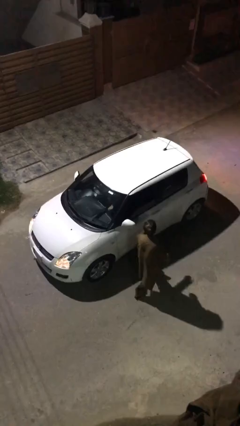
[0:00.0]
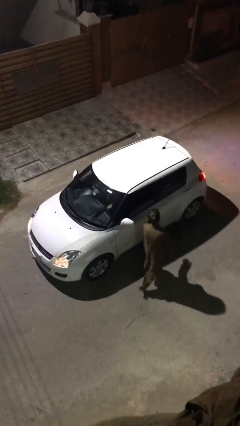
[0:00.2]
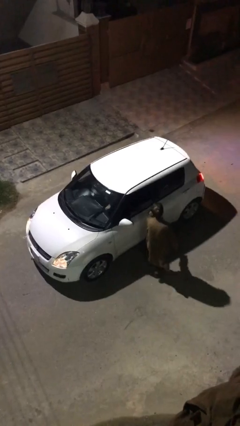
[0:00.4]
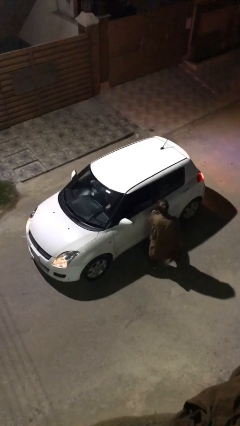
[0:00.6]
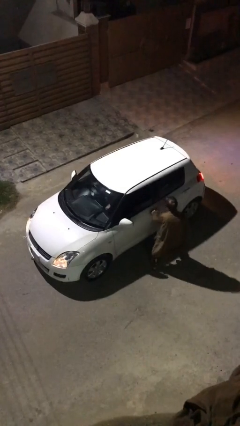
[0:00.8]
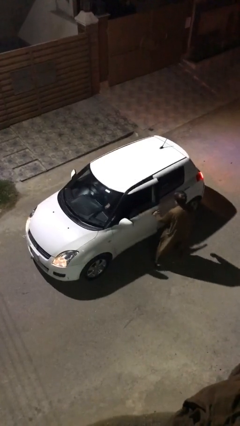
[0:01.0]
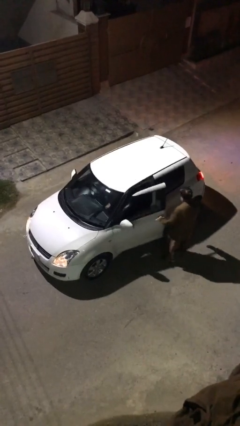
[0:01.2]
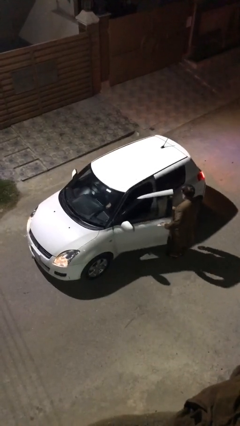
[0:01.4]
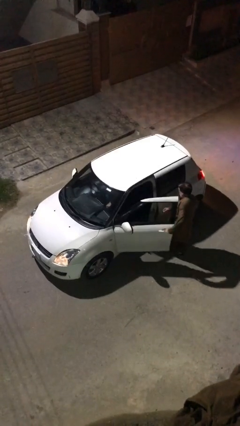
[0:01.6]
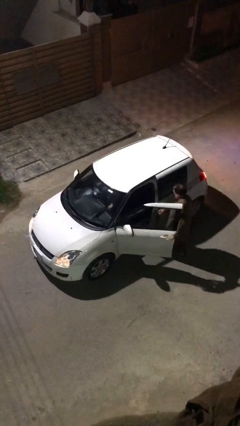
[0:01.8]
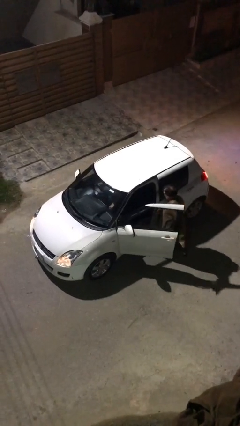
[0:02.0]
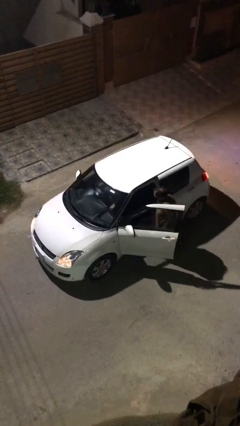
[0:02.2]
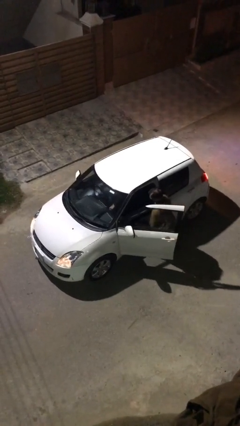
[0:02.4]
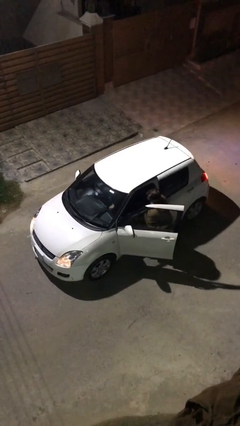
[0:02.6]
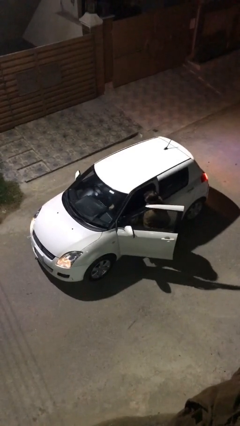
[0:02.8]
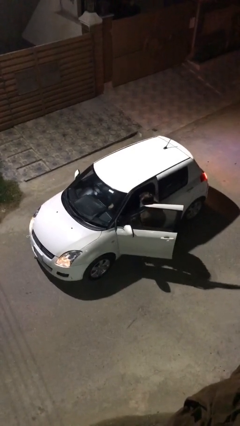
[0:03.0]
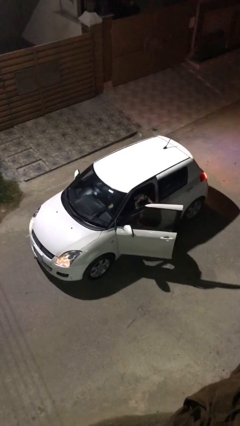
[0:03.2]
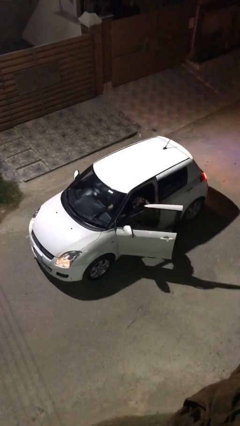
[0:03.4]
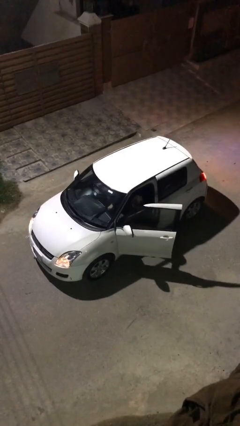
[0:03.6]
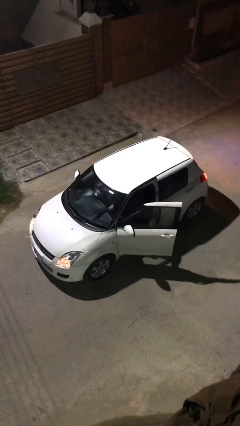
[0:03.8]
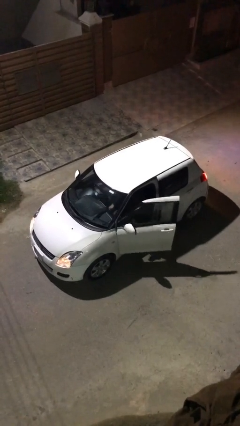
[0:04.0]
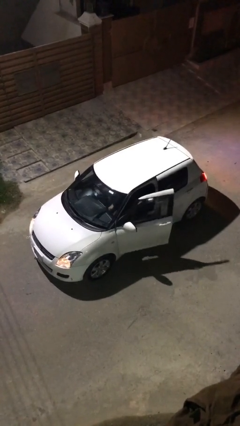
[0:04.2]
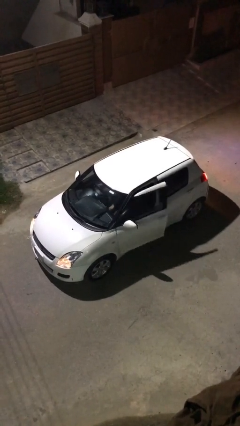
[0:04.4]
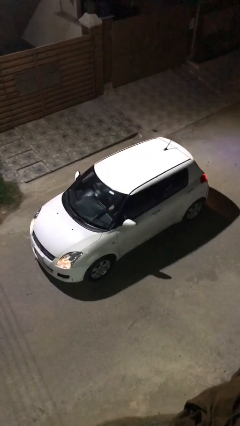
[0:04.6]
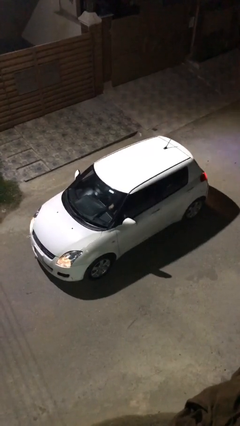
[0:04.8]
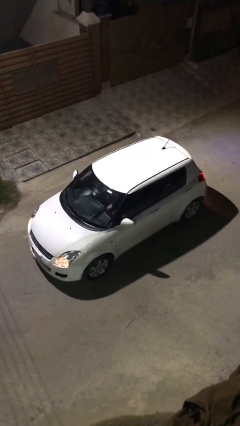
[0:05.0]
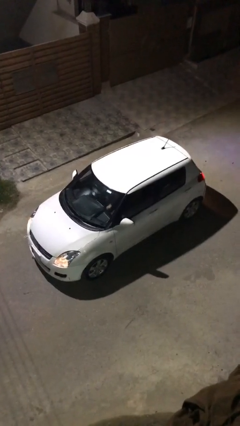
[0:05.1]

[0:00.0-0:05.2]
car picks up person

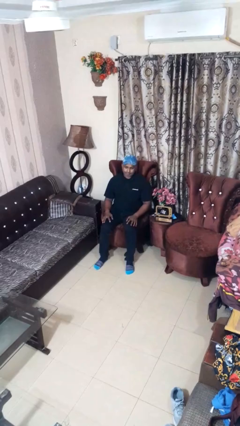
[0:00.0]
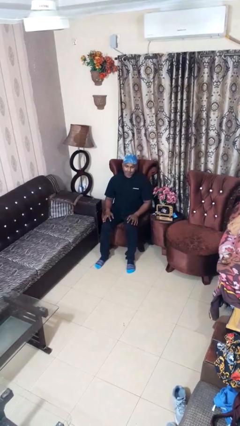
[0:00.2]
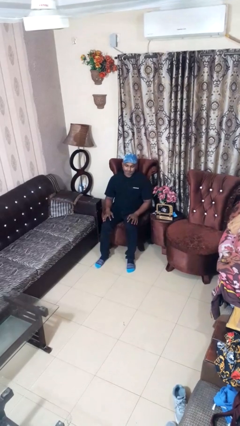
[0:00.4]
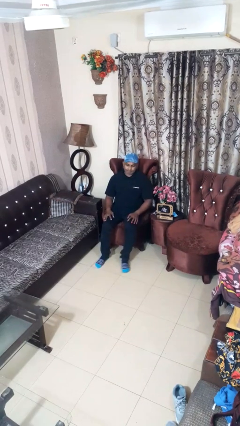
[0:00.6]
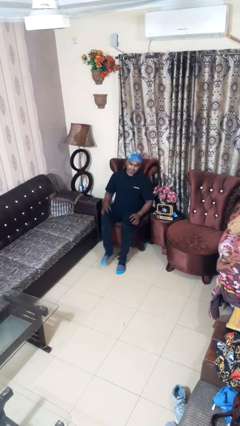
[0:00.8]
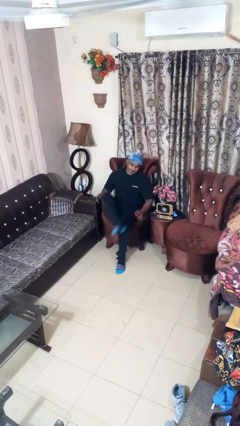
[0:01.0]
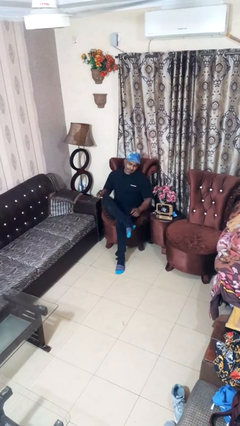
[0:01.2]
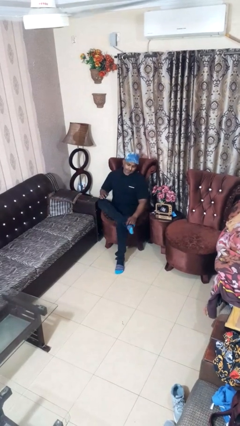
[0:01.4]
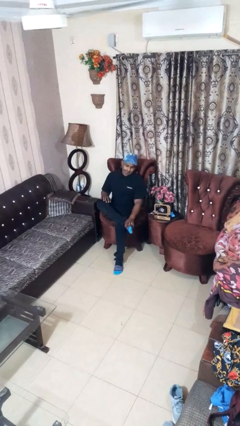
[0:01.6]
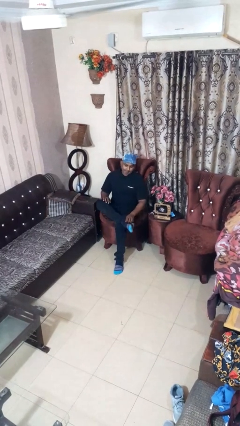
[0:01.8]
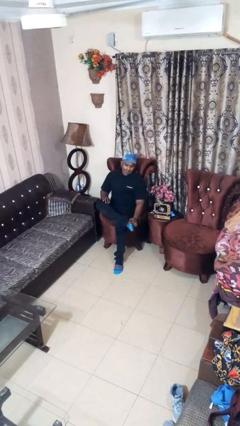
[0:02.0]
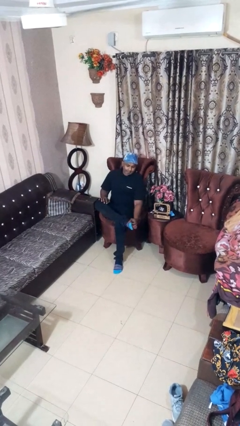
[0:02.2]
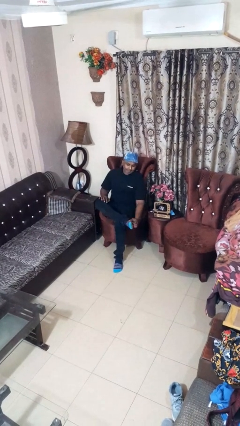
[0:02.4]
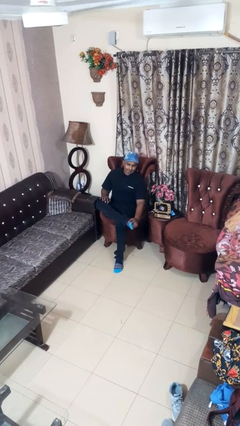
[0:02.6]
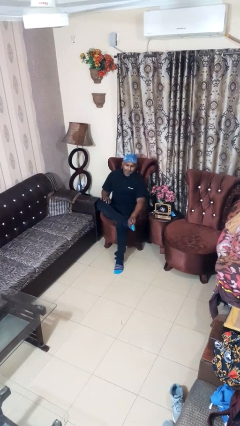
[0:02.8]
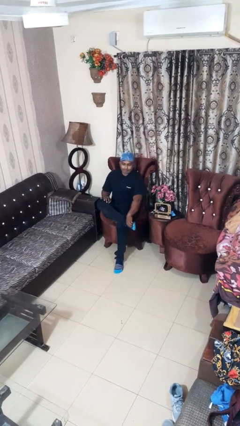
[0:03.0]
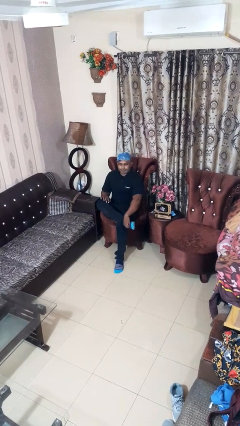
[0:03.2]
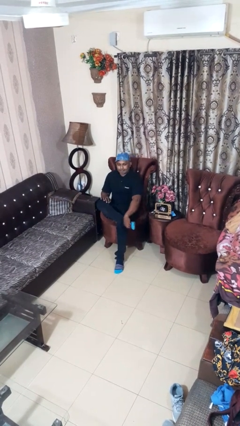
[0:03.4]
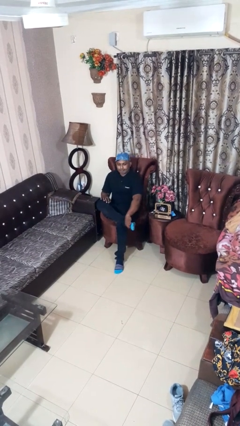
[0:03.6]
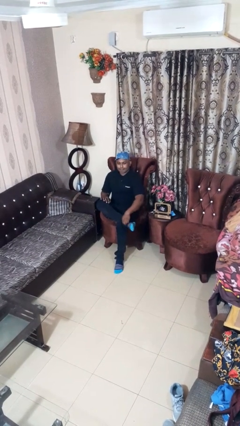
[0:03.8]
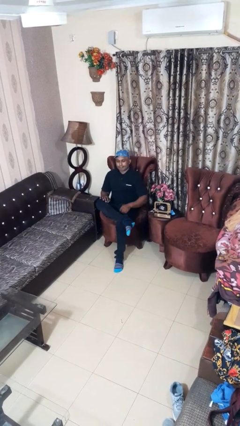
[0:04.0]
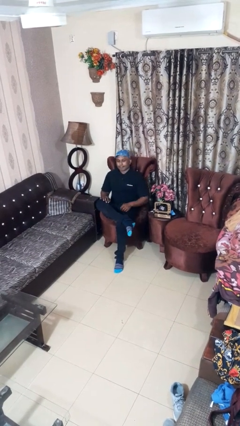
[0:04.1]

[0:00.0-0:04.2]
person rubs foot

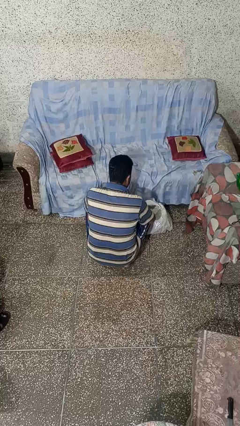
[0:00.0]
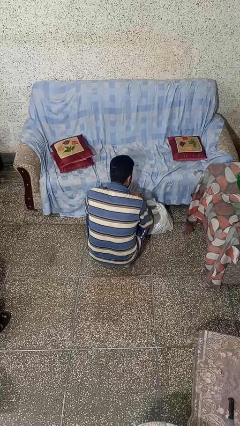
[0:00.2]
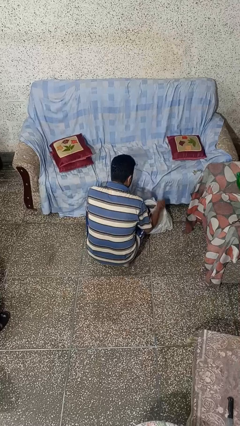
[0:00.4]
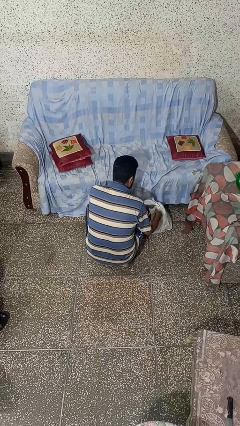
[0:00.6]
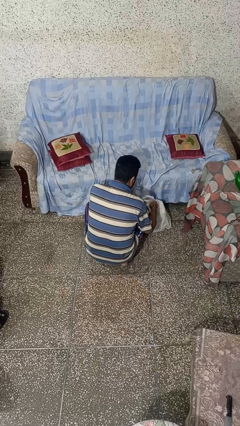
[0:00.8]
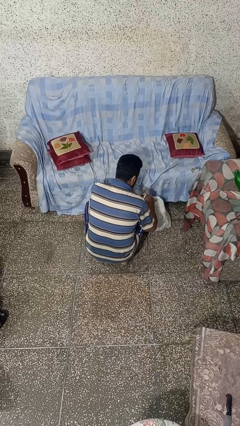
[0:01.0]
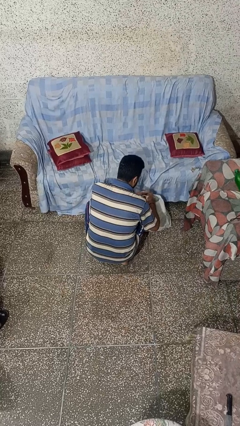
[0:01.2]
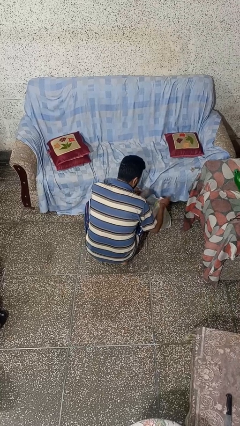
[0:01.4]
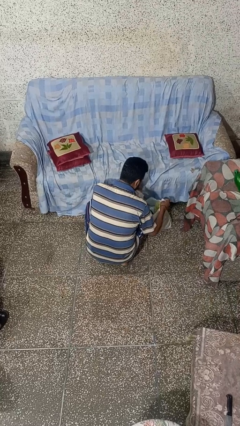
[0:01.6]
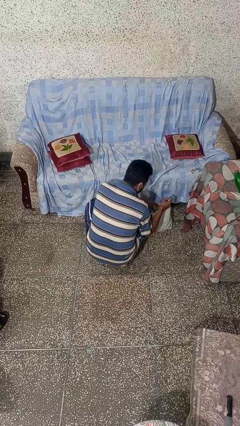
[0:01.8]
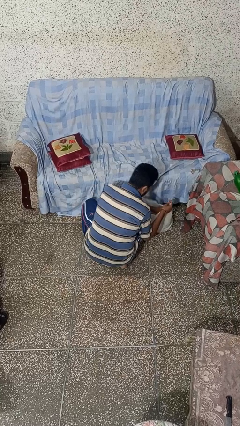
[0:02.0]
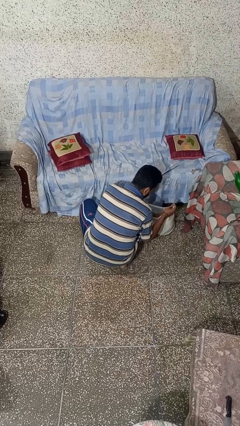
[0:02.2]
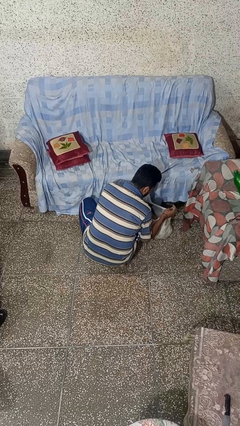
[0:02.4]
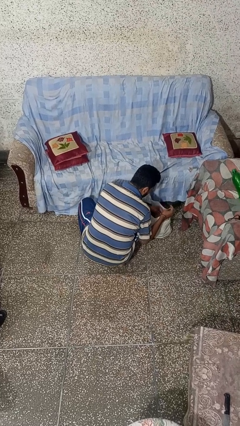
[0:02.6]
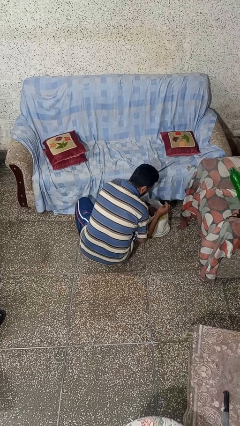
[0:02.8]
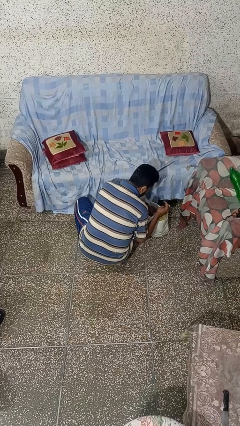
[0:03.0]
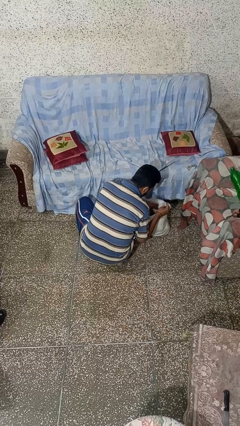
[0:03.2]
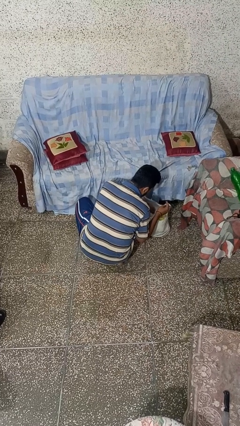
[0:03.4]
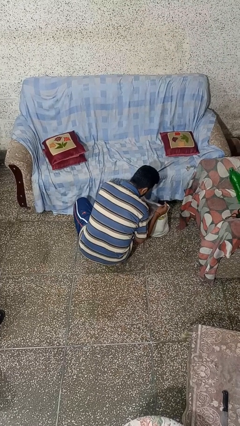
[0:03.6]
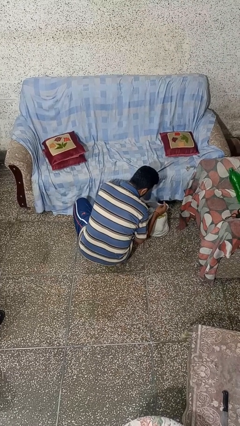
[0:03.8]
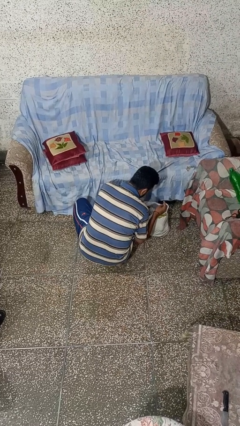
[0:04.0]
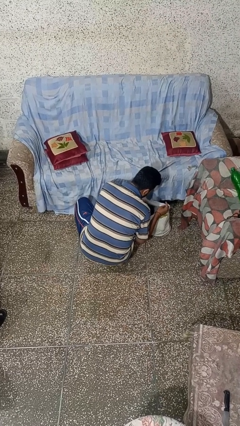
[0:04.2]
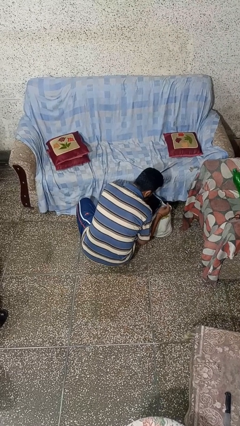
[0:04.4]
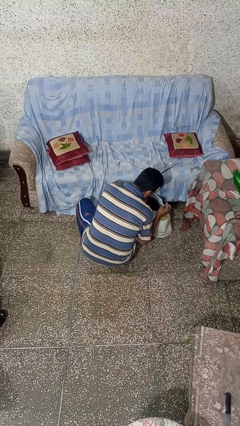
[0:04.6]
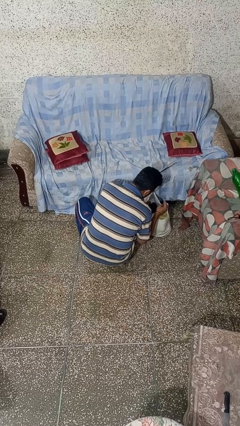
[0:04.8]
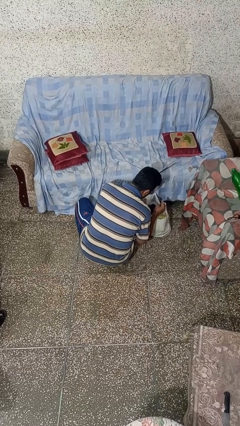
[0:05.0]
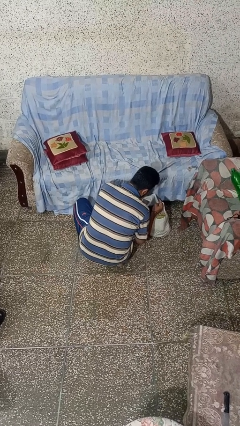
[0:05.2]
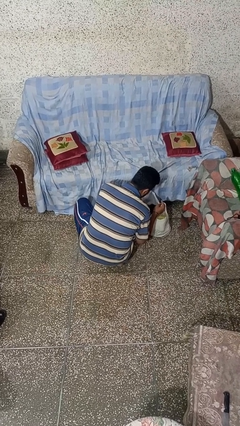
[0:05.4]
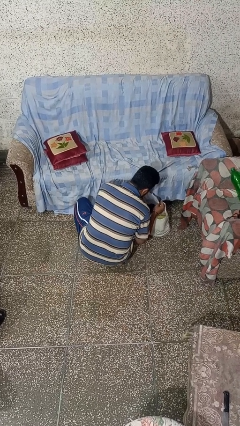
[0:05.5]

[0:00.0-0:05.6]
person searches in bag

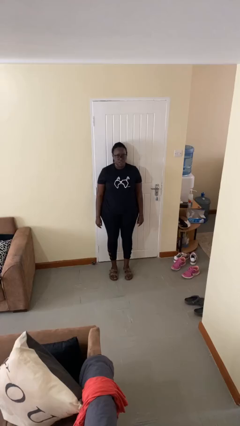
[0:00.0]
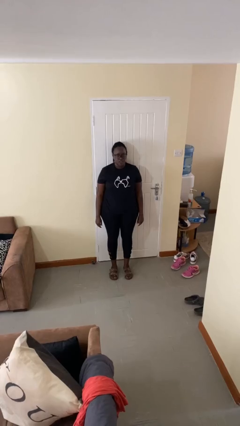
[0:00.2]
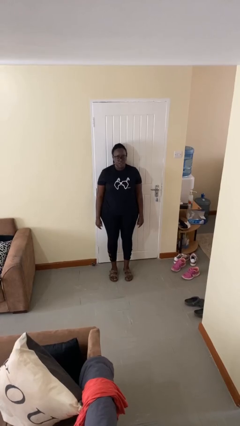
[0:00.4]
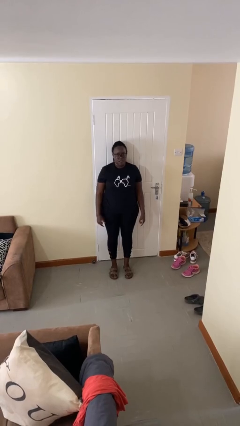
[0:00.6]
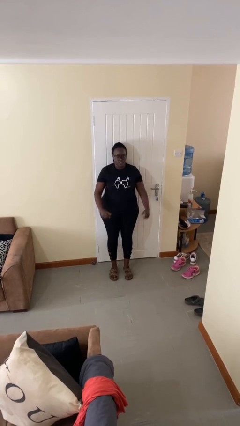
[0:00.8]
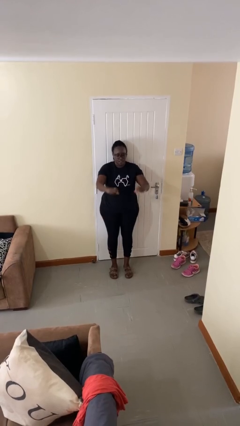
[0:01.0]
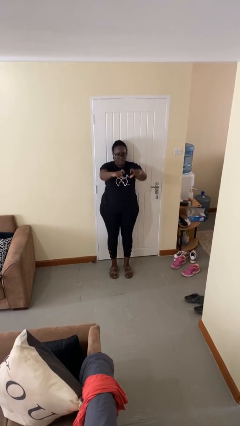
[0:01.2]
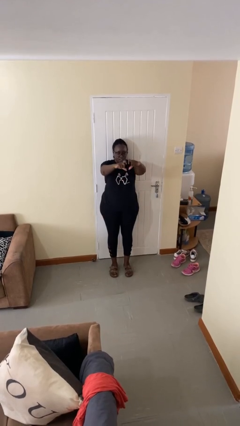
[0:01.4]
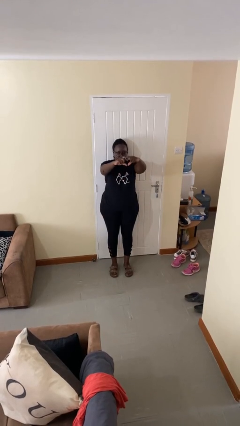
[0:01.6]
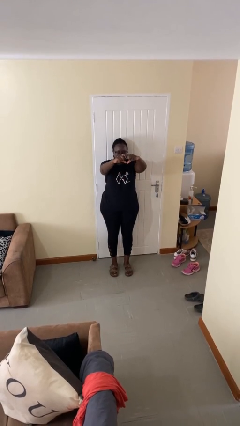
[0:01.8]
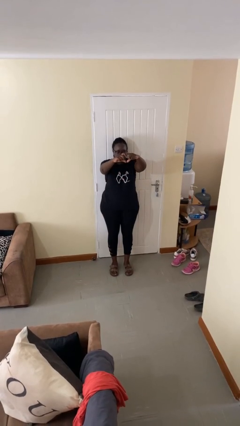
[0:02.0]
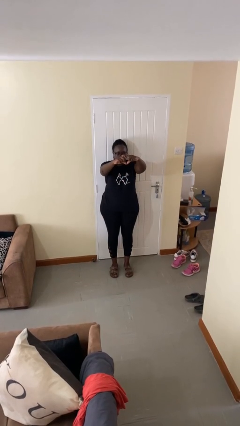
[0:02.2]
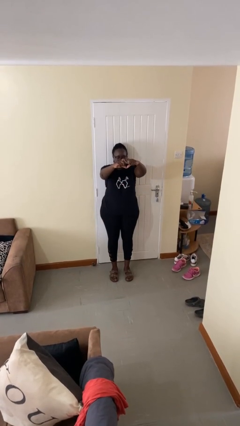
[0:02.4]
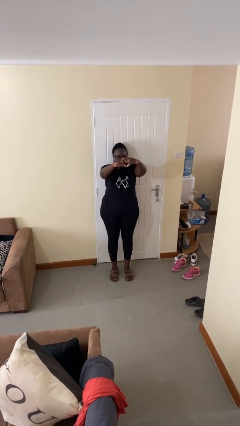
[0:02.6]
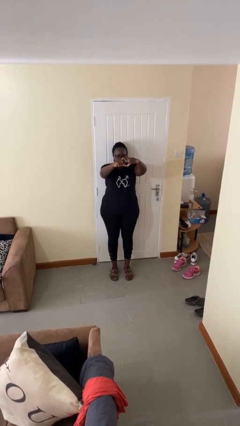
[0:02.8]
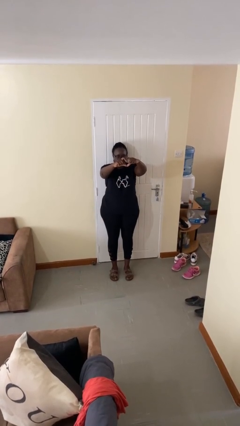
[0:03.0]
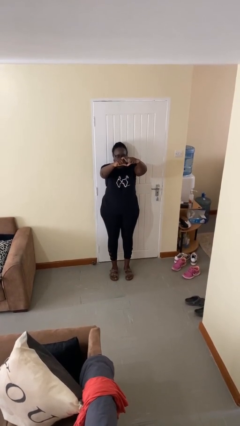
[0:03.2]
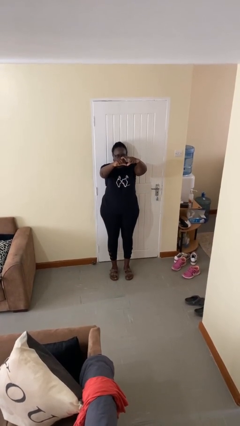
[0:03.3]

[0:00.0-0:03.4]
person gestures heart
